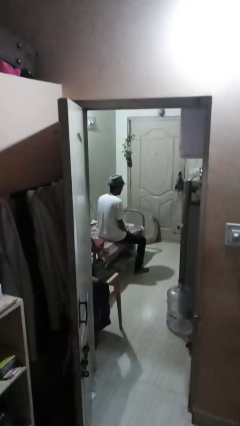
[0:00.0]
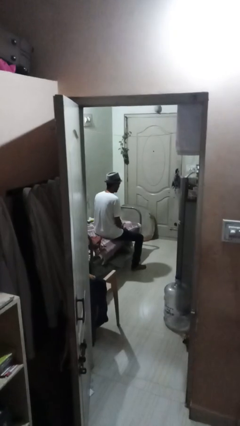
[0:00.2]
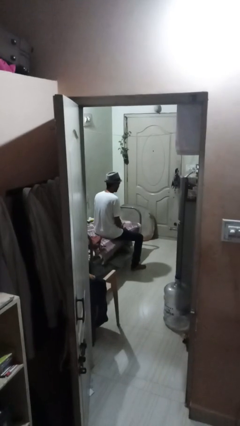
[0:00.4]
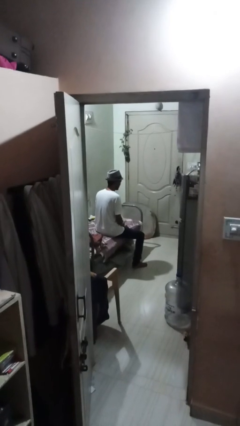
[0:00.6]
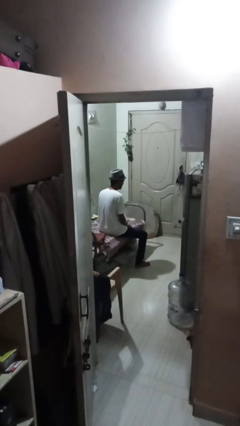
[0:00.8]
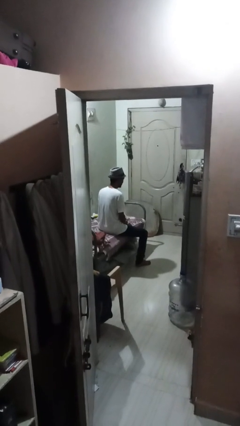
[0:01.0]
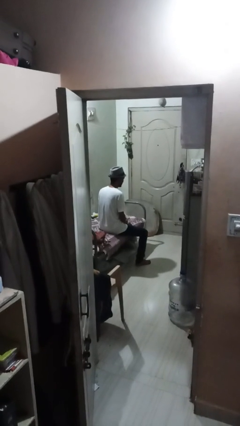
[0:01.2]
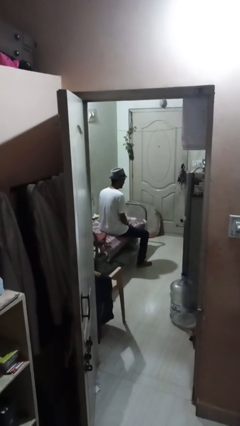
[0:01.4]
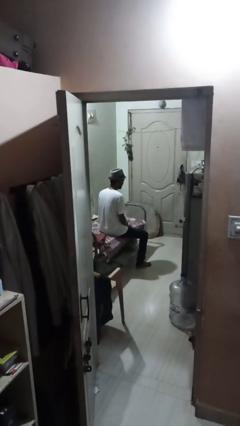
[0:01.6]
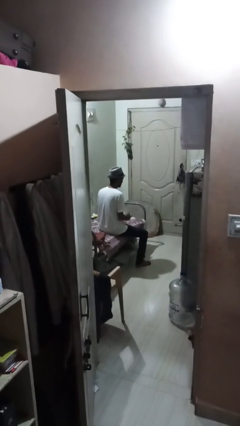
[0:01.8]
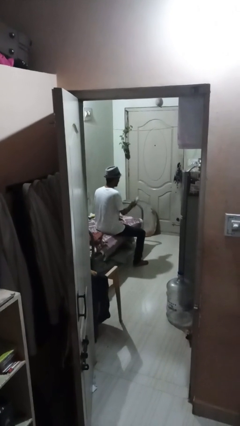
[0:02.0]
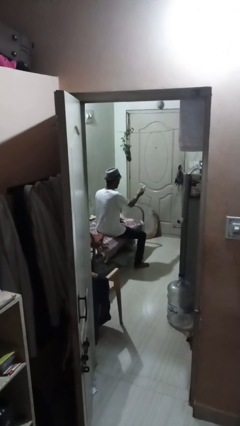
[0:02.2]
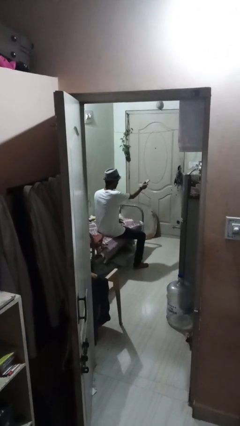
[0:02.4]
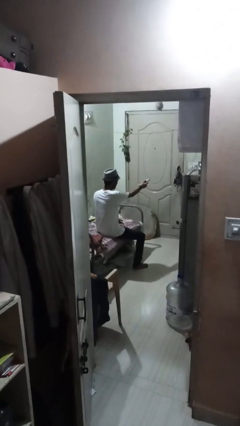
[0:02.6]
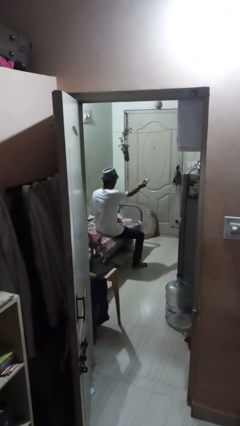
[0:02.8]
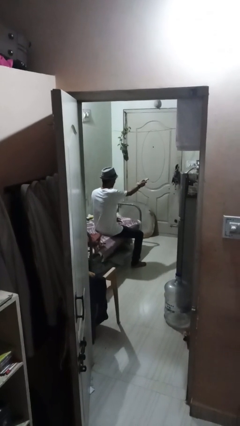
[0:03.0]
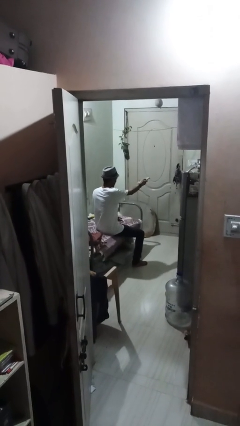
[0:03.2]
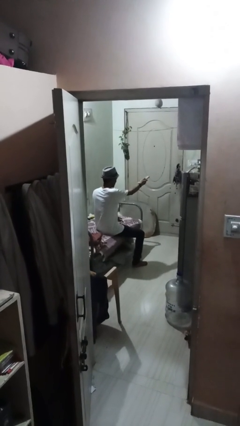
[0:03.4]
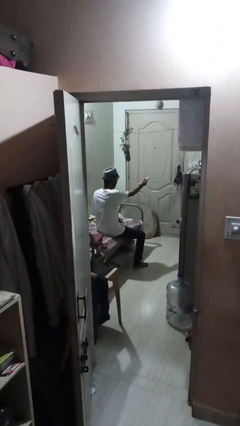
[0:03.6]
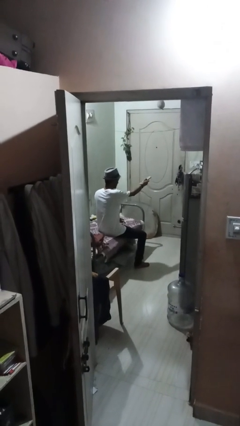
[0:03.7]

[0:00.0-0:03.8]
person uses television remote

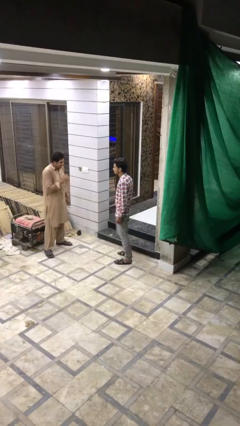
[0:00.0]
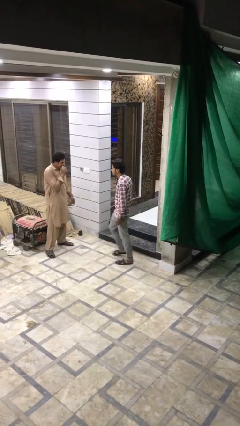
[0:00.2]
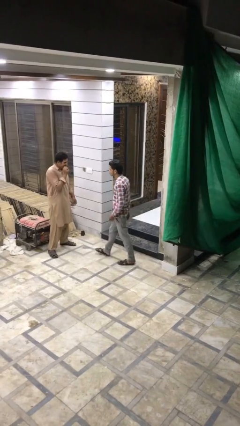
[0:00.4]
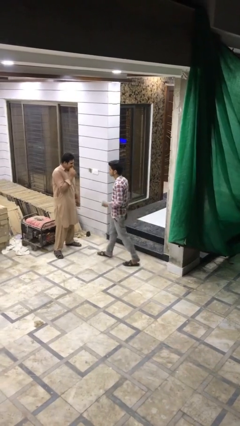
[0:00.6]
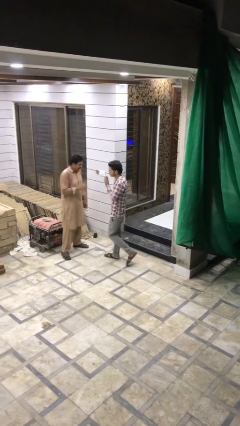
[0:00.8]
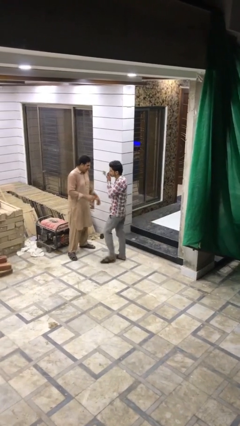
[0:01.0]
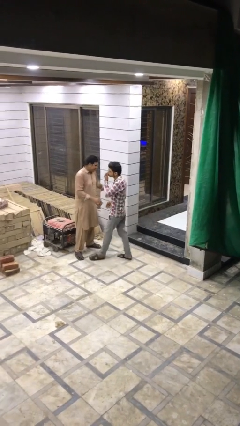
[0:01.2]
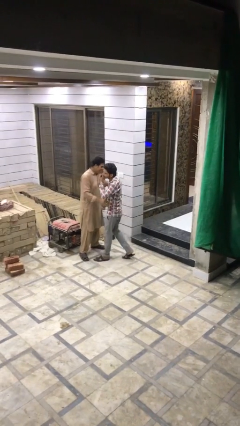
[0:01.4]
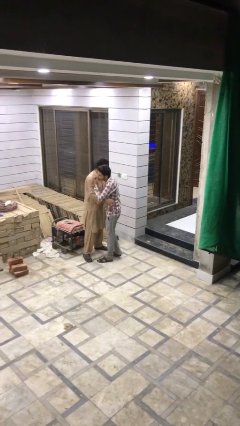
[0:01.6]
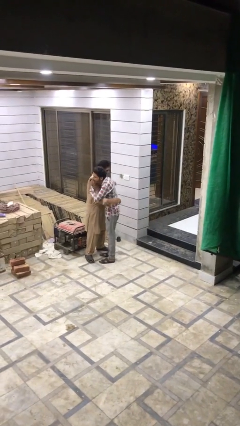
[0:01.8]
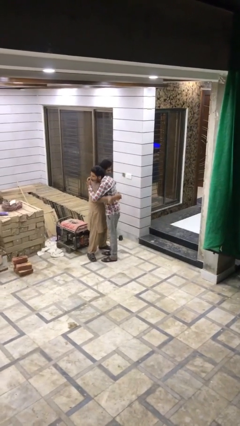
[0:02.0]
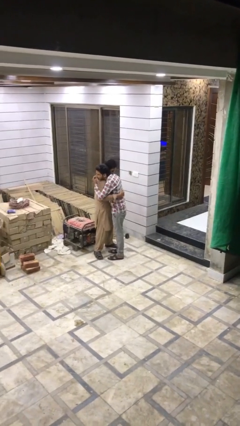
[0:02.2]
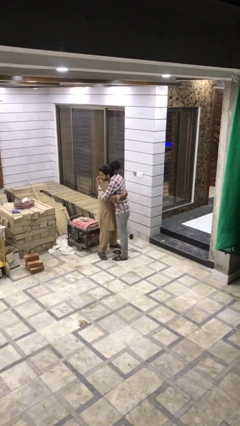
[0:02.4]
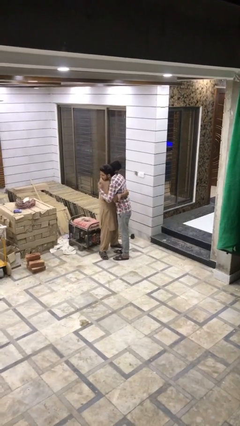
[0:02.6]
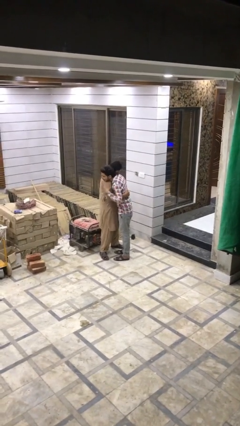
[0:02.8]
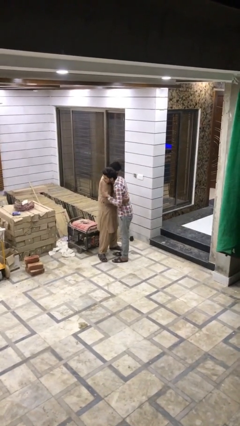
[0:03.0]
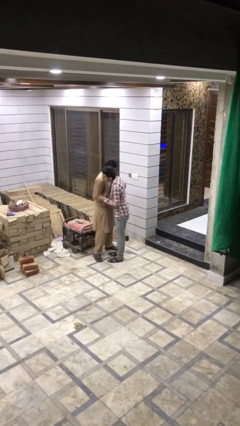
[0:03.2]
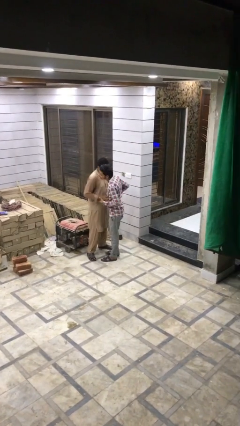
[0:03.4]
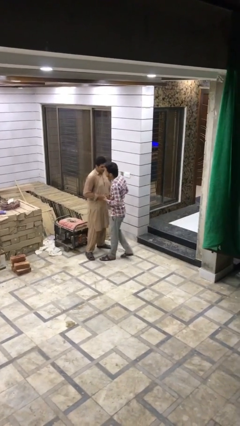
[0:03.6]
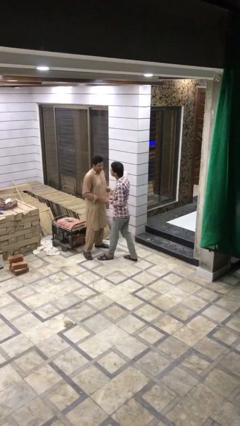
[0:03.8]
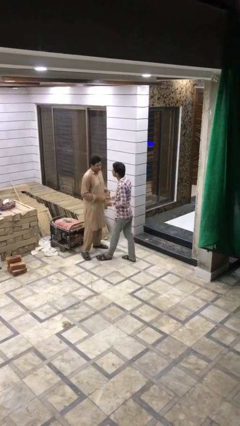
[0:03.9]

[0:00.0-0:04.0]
person embraces person

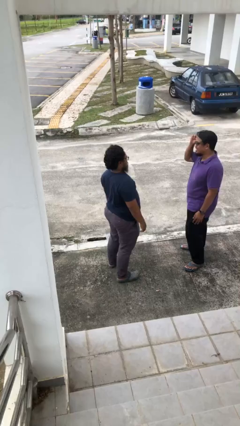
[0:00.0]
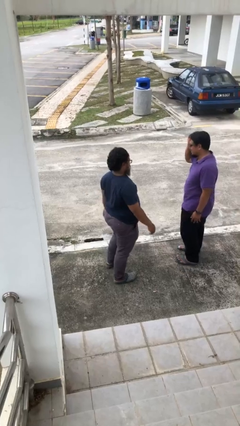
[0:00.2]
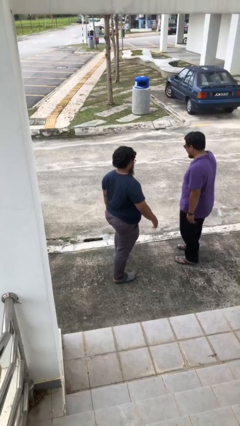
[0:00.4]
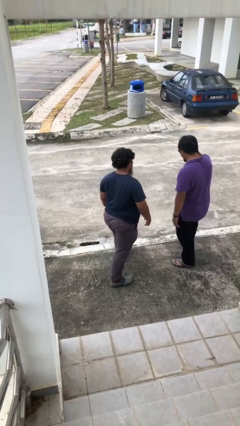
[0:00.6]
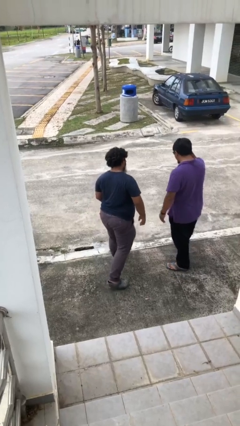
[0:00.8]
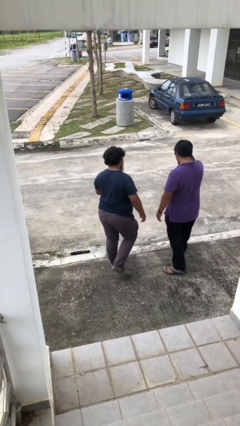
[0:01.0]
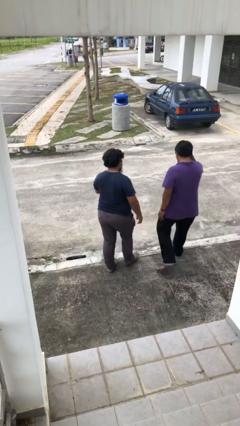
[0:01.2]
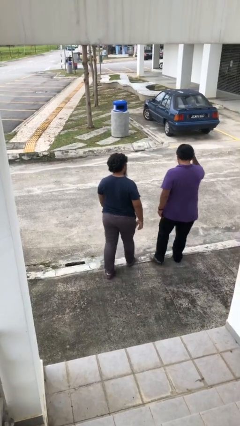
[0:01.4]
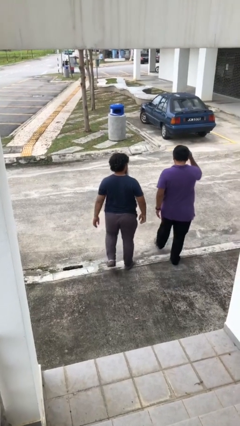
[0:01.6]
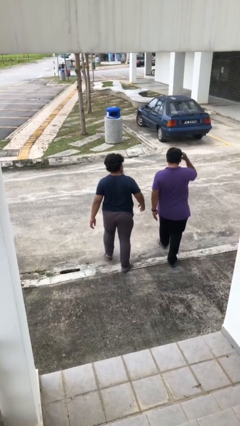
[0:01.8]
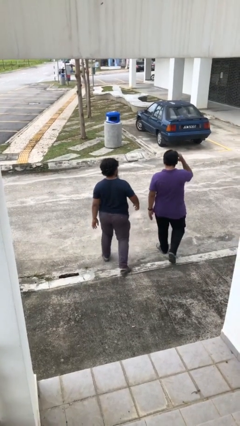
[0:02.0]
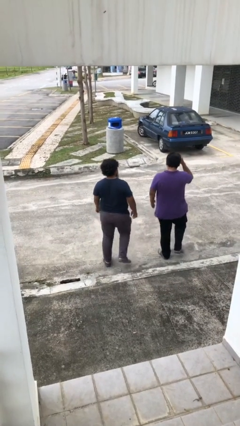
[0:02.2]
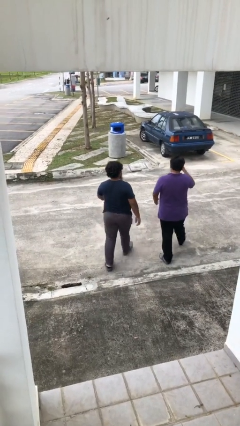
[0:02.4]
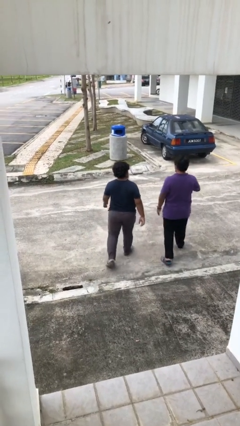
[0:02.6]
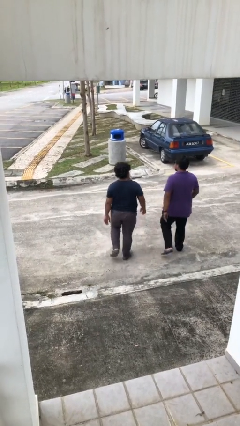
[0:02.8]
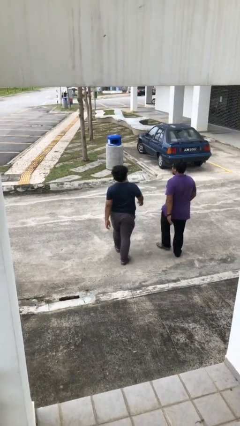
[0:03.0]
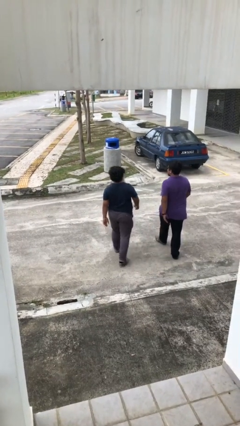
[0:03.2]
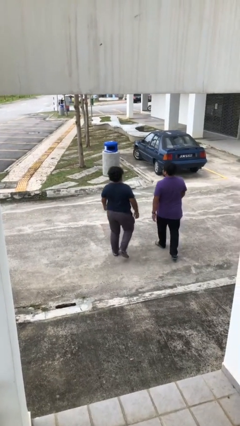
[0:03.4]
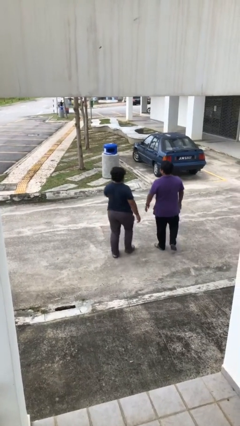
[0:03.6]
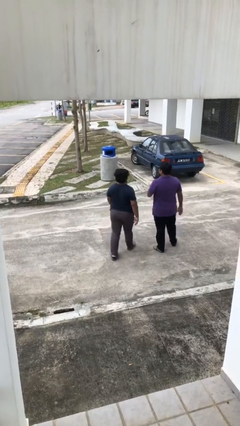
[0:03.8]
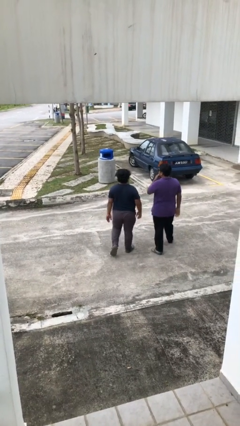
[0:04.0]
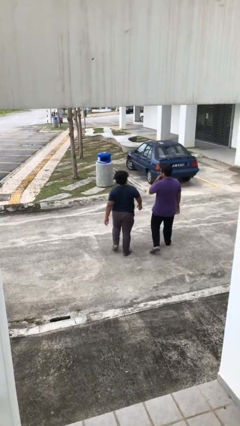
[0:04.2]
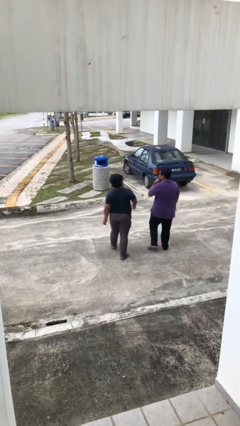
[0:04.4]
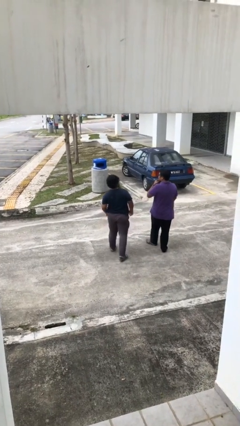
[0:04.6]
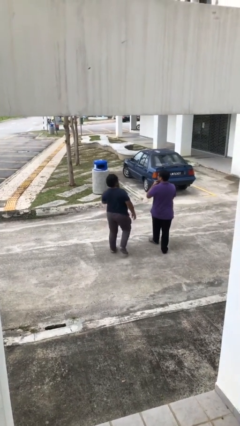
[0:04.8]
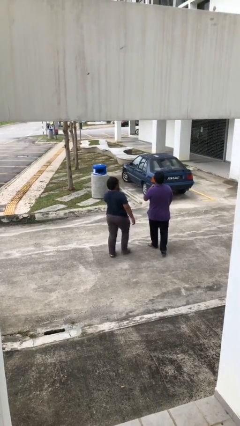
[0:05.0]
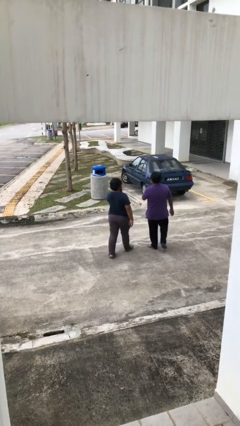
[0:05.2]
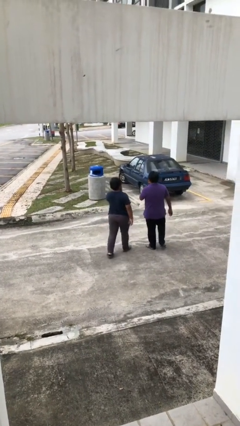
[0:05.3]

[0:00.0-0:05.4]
person talks to person

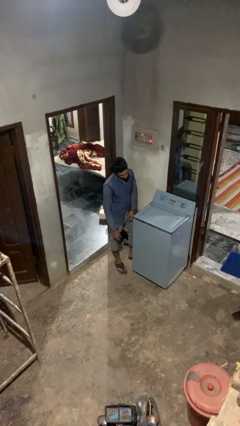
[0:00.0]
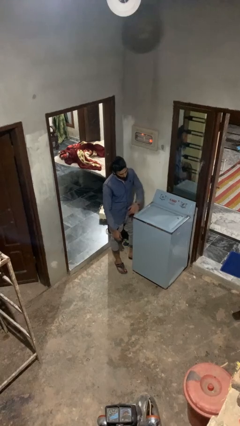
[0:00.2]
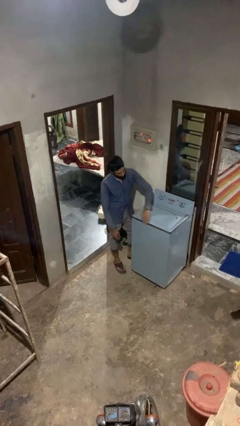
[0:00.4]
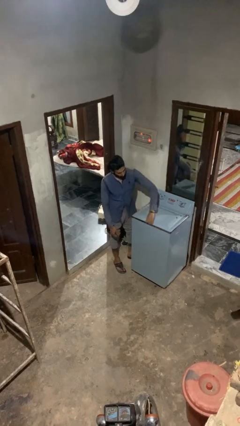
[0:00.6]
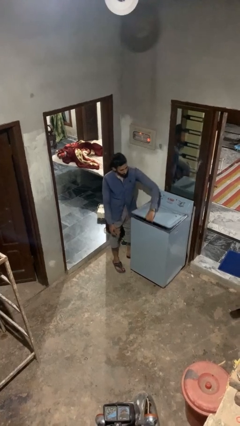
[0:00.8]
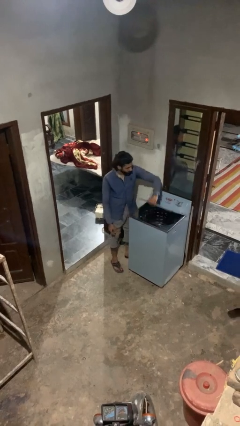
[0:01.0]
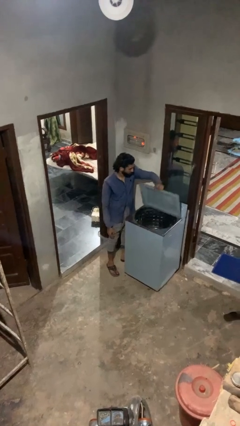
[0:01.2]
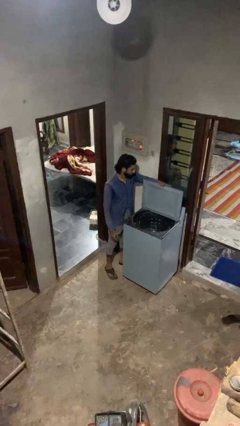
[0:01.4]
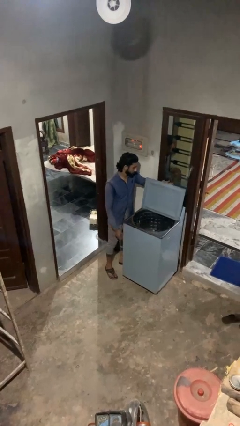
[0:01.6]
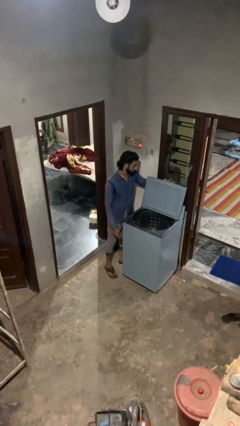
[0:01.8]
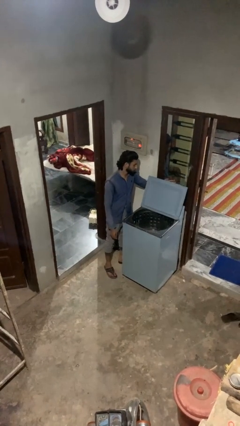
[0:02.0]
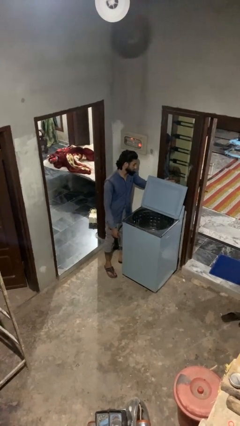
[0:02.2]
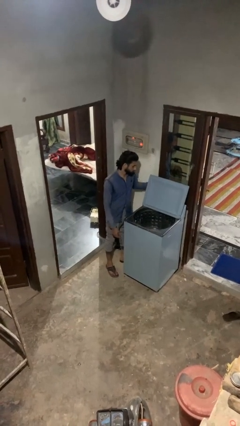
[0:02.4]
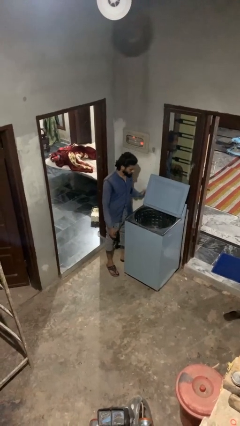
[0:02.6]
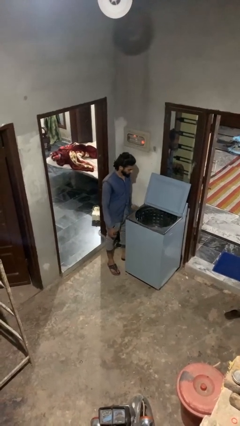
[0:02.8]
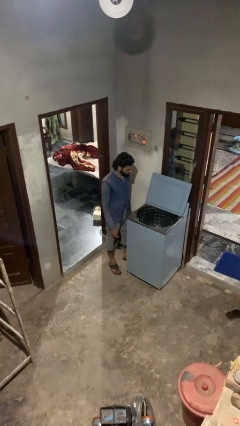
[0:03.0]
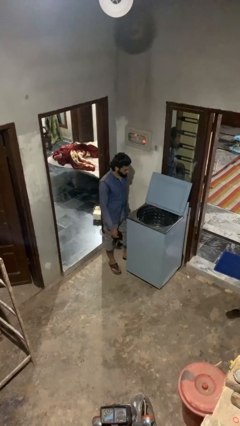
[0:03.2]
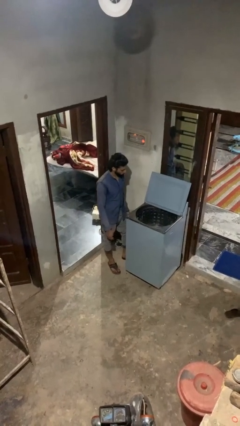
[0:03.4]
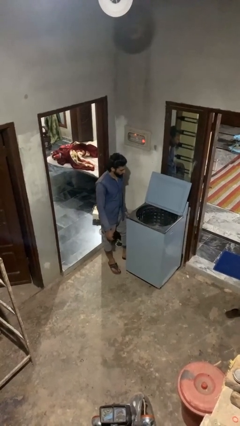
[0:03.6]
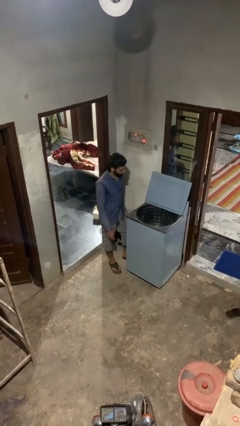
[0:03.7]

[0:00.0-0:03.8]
person opens clothes washer
